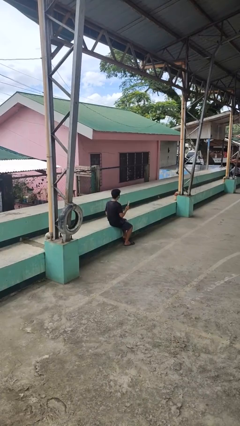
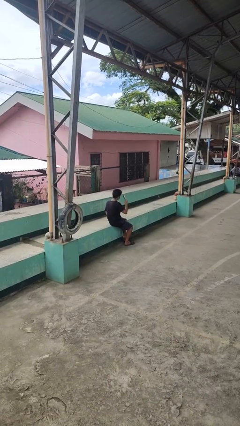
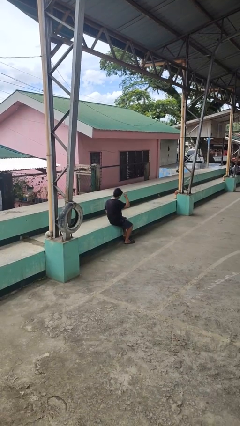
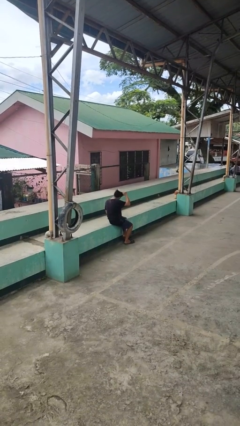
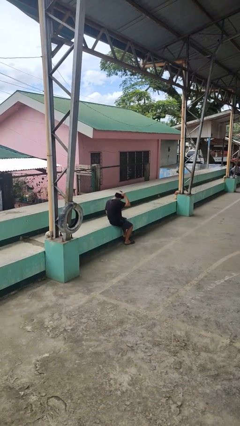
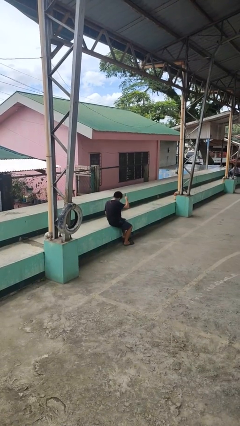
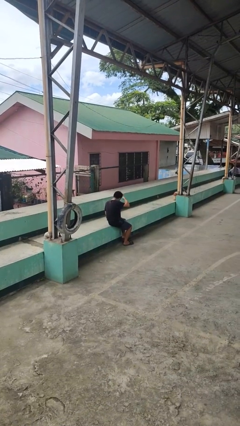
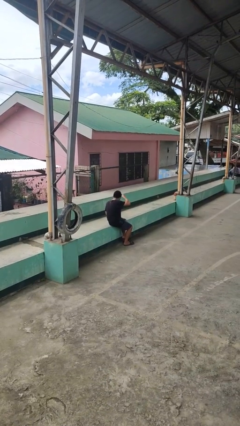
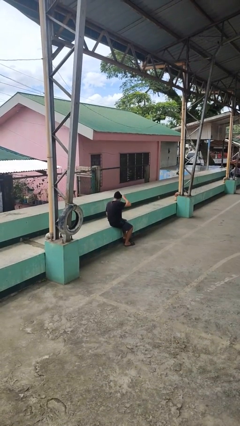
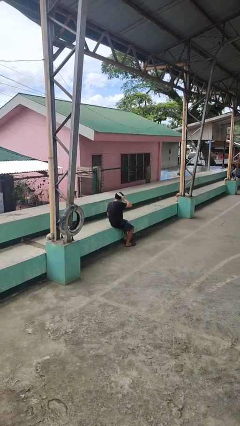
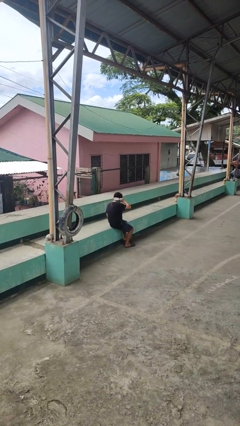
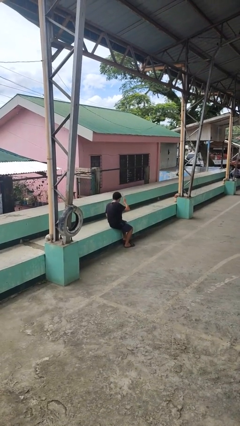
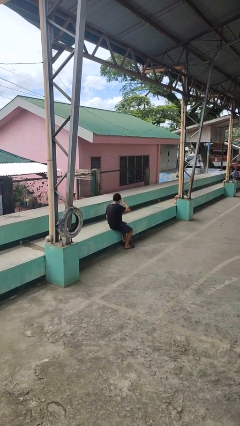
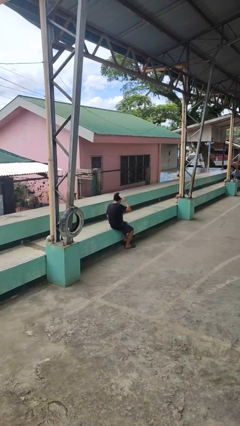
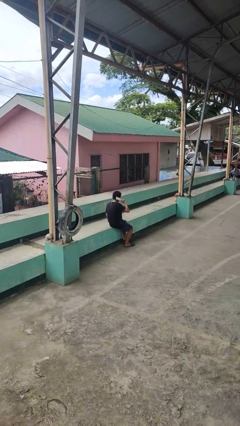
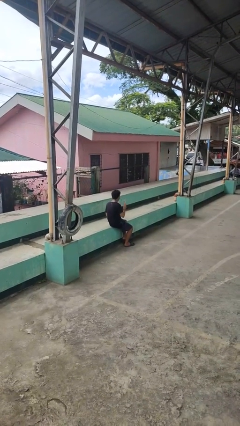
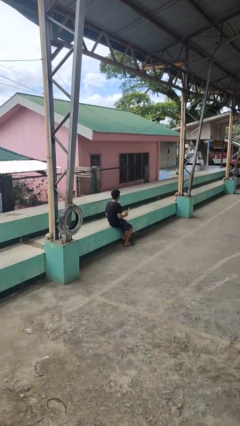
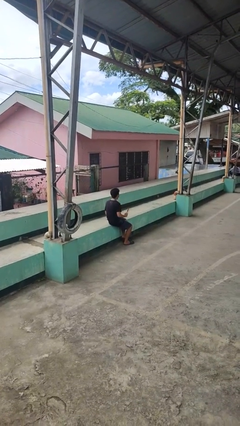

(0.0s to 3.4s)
person brushes hair

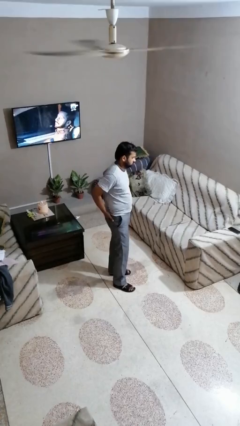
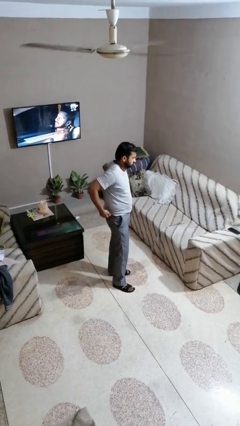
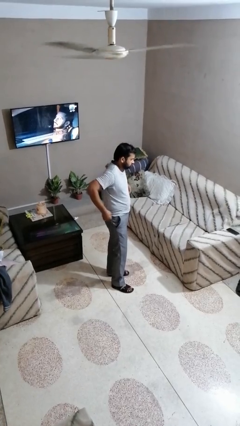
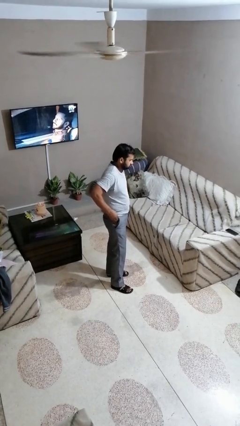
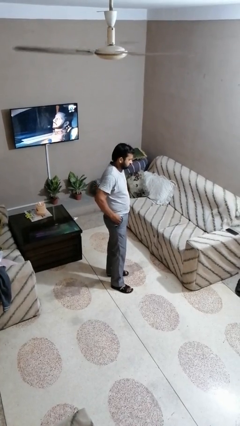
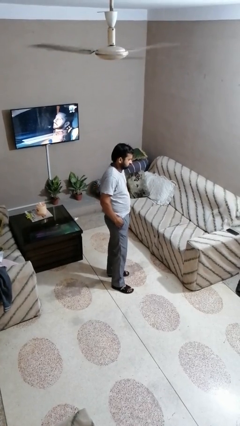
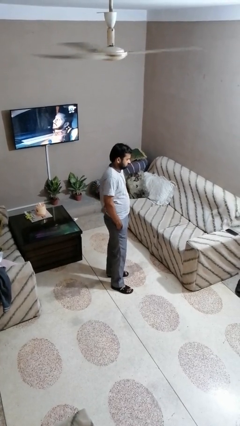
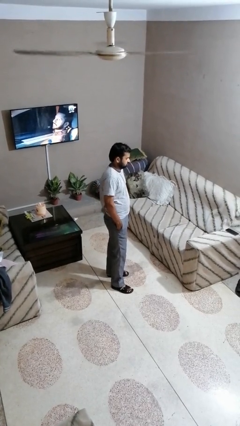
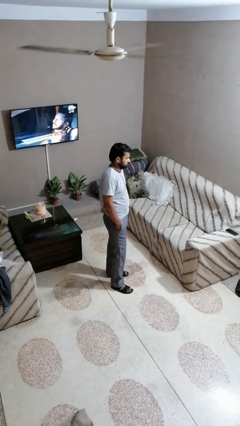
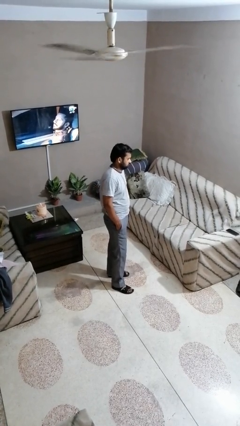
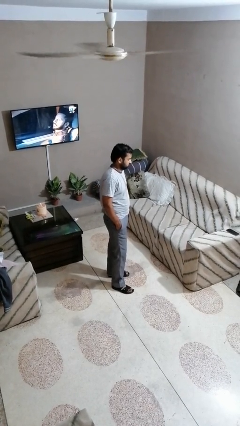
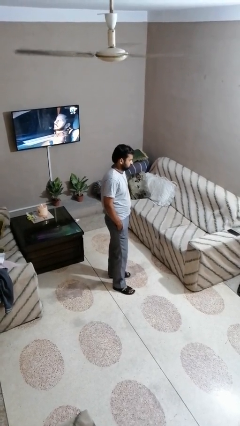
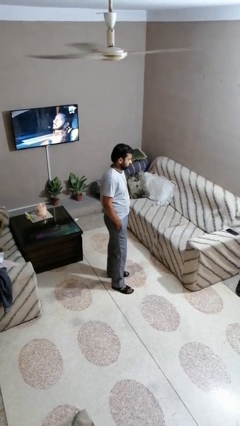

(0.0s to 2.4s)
person puts hands in back pockets

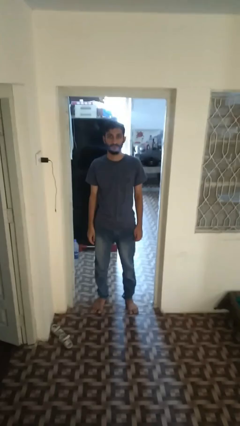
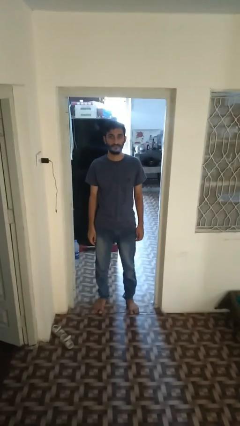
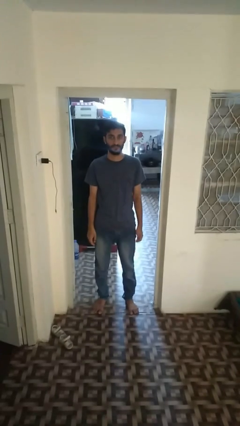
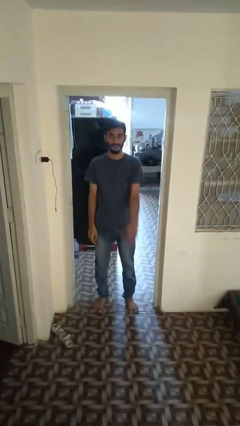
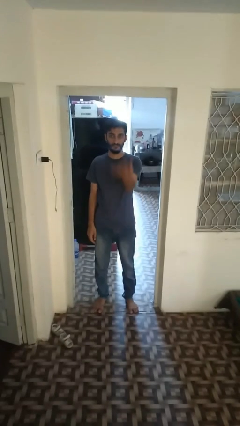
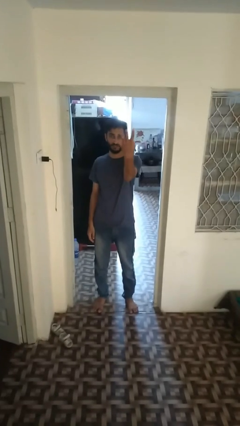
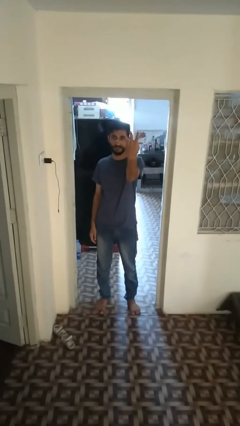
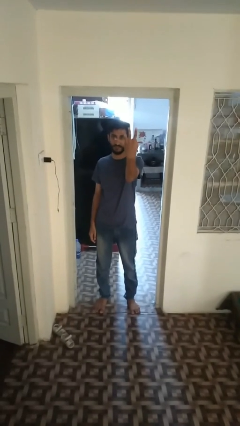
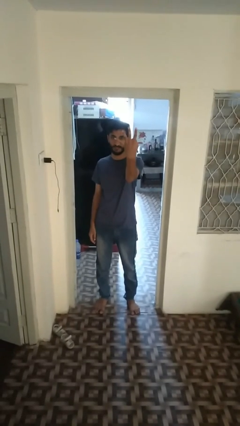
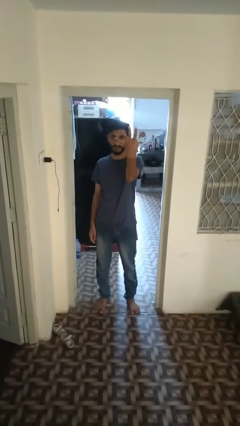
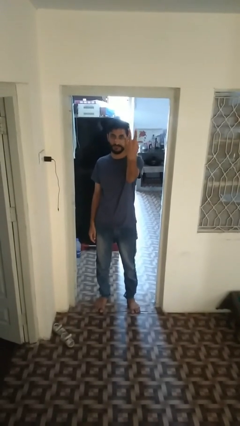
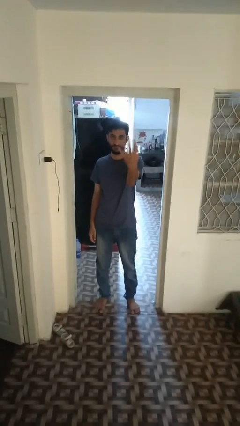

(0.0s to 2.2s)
person gestures number four

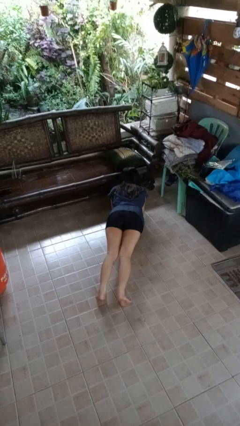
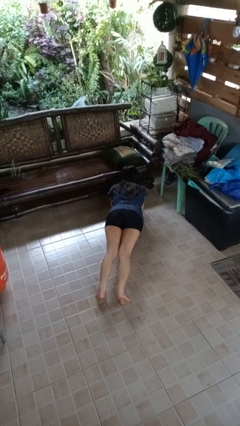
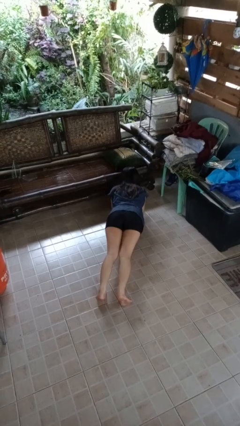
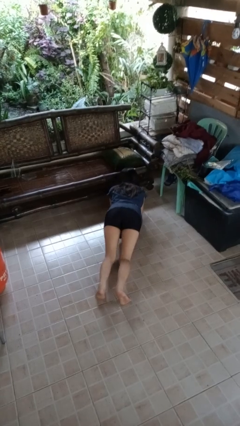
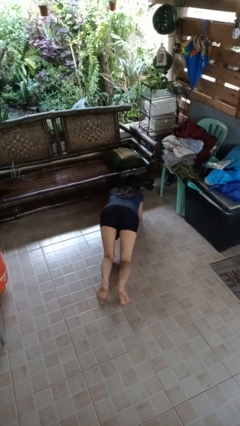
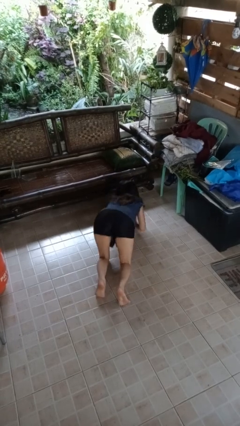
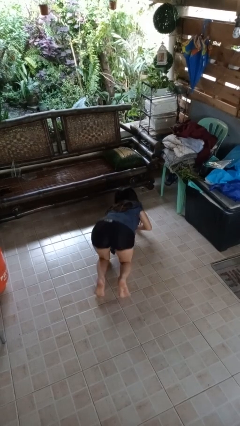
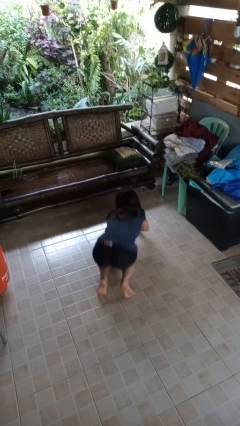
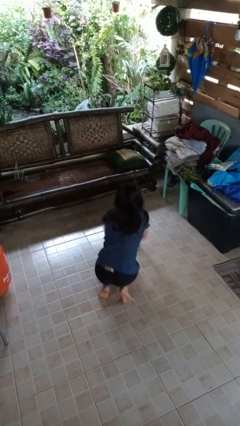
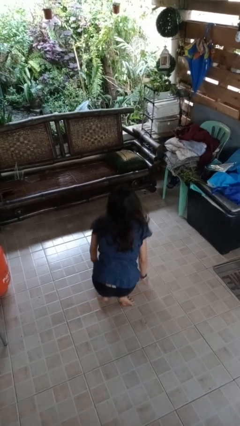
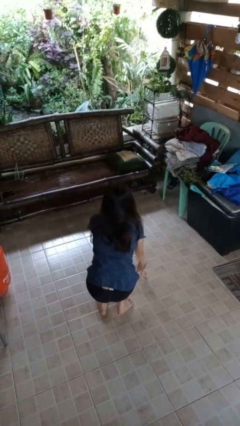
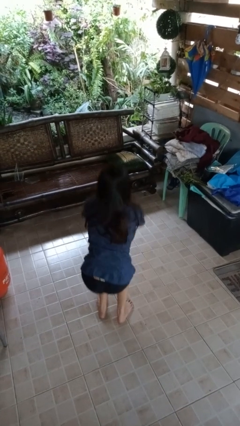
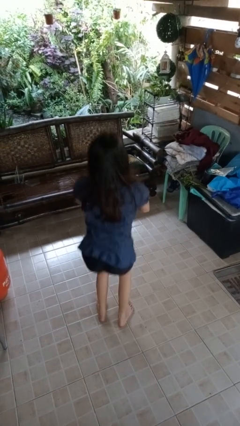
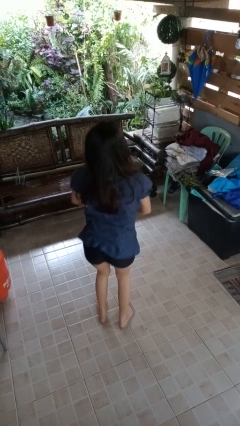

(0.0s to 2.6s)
person stands up from floor

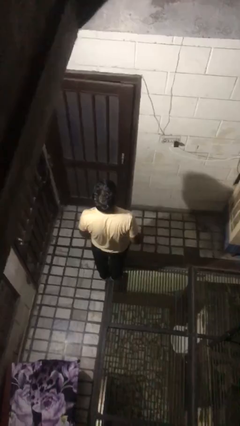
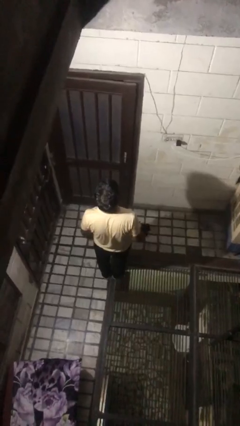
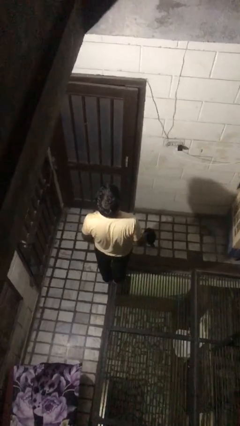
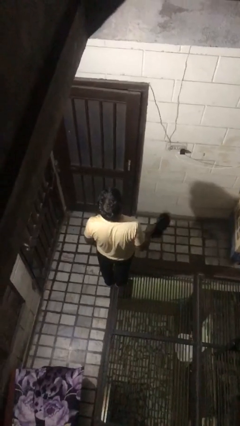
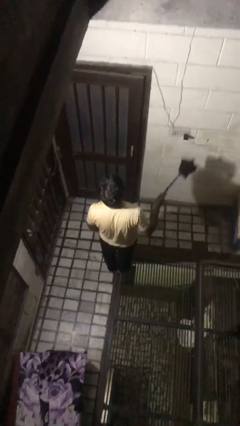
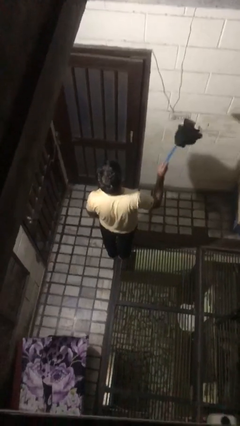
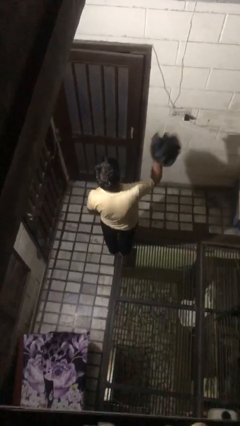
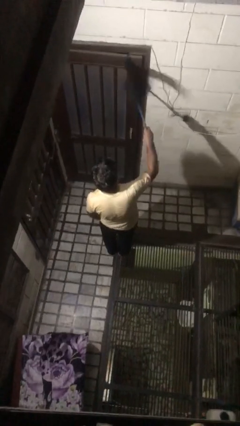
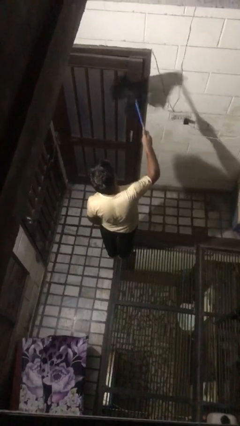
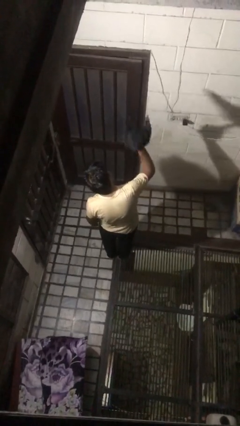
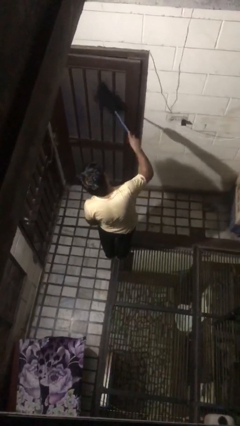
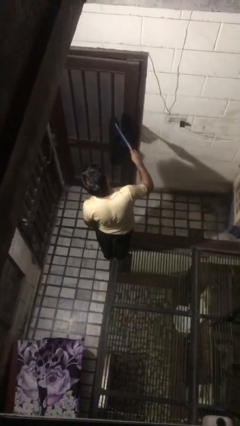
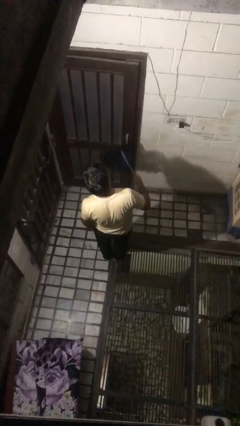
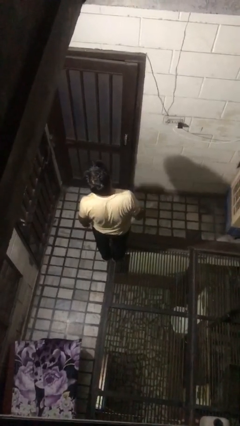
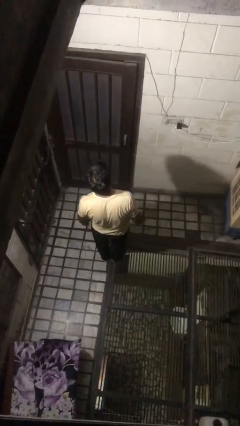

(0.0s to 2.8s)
person dusts furniture

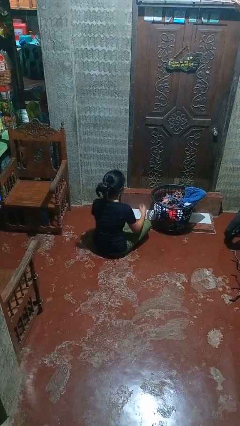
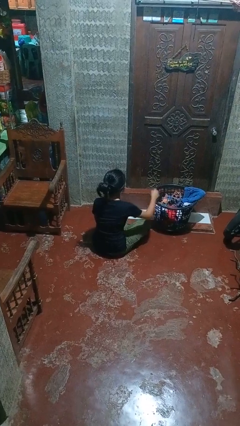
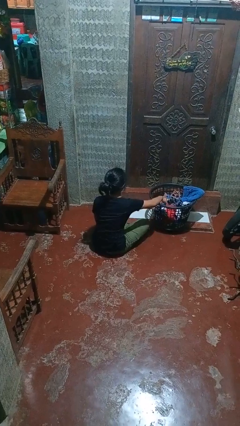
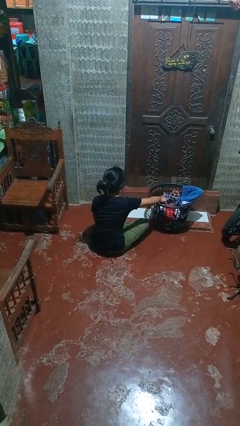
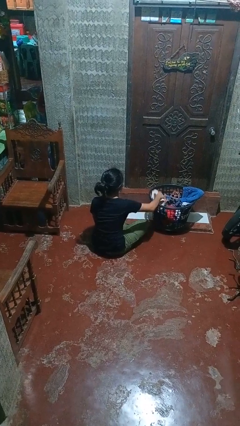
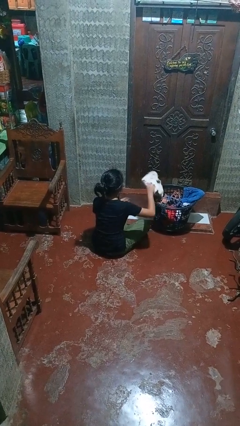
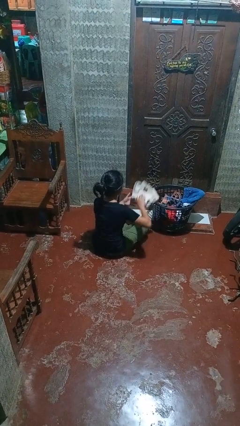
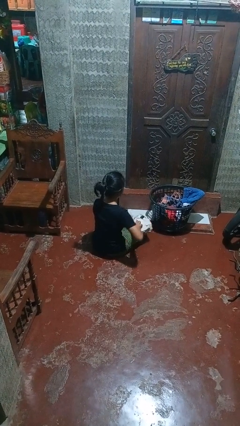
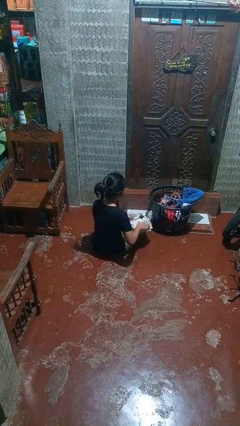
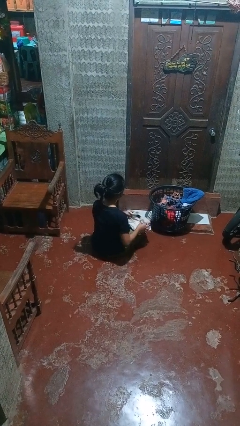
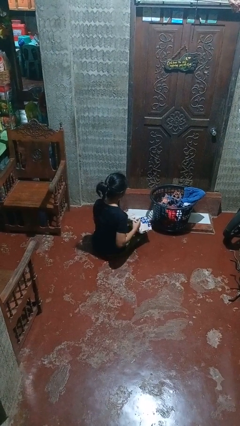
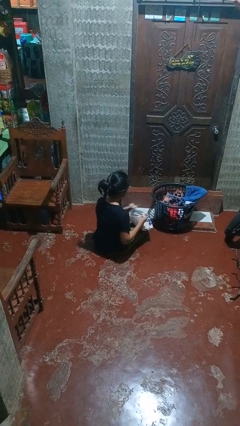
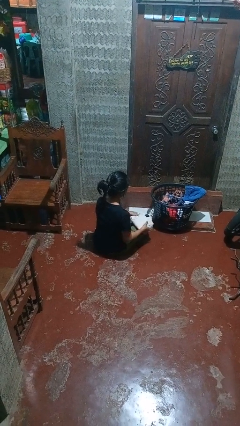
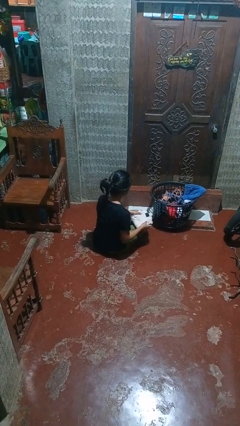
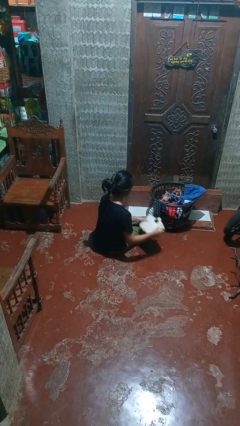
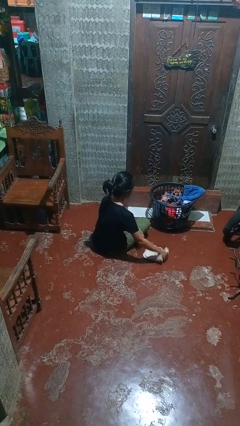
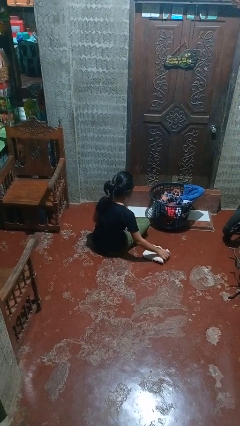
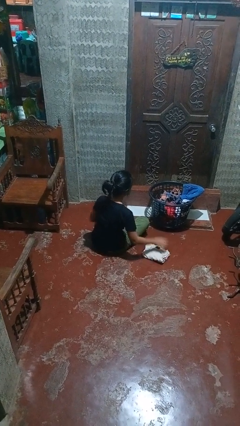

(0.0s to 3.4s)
person folds shirt

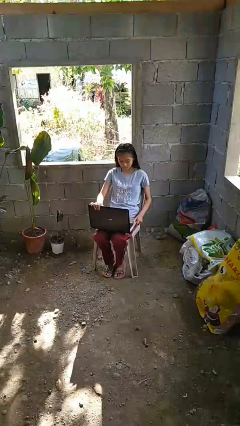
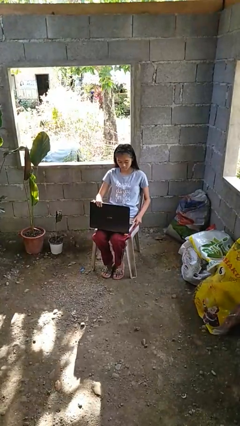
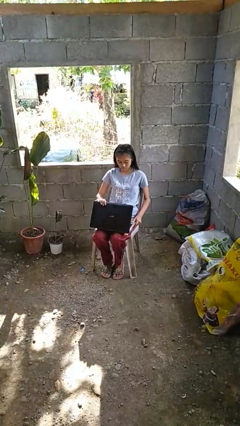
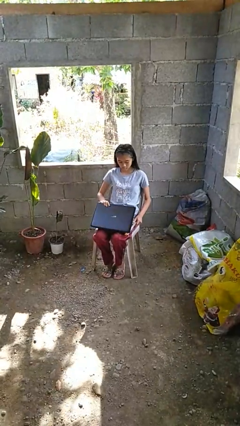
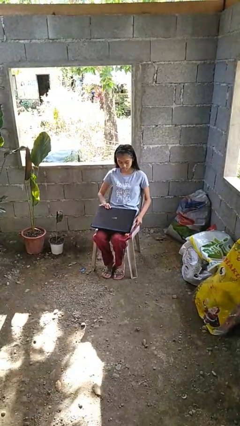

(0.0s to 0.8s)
person closes laptop
